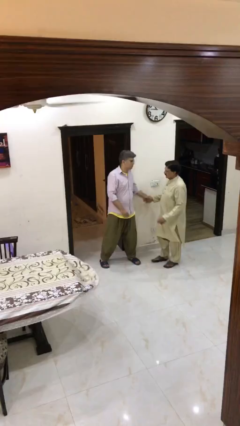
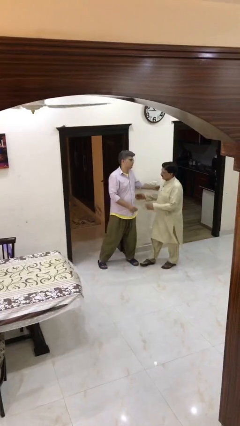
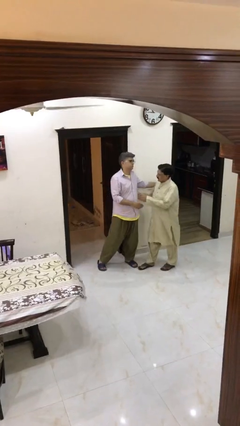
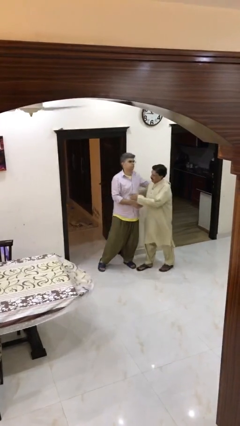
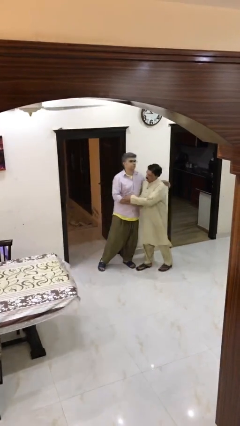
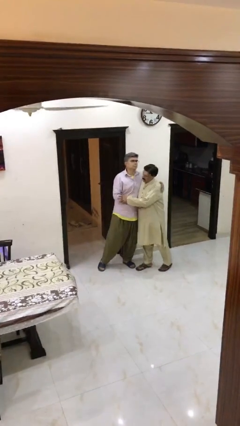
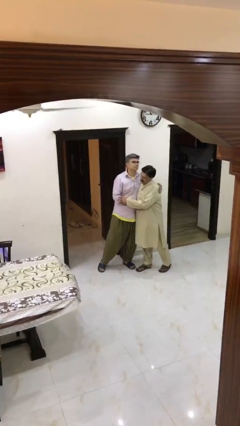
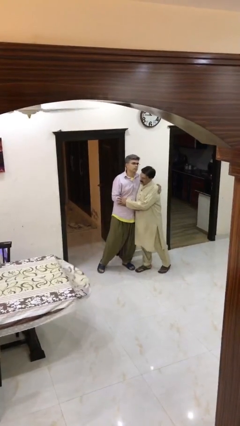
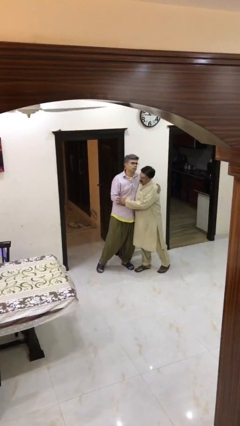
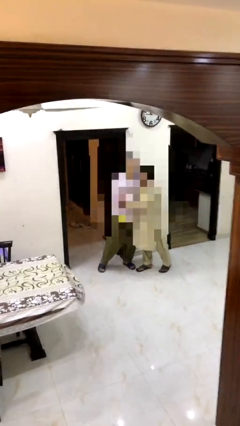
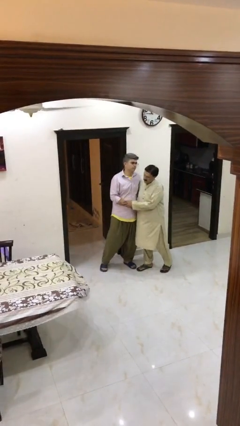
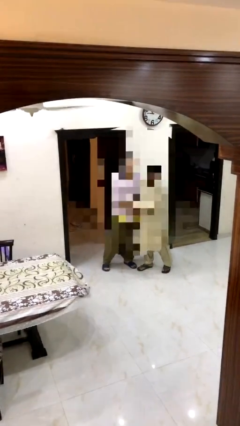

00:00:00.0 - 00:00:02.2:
person embraces person

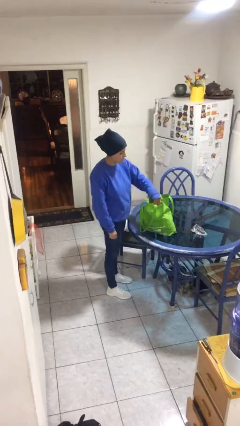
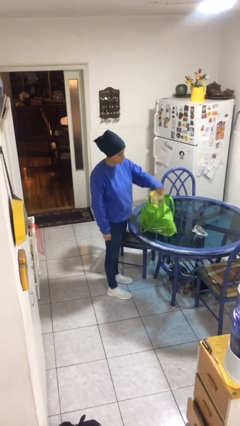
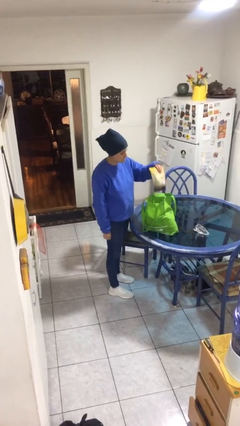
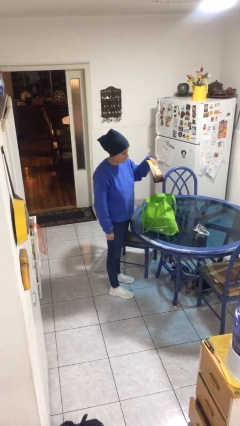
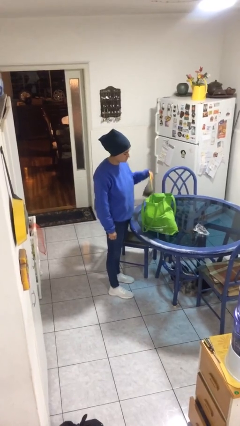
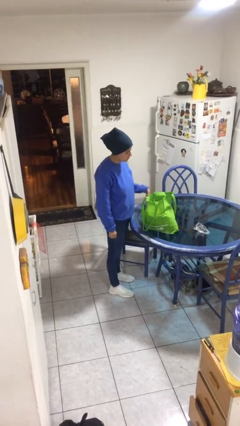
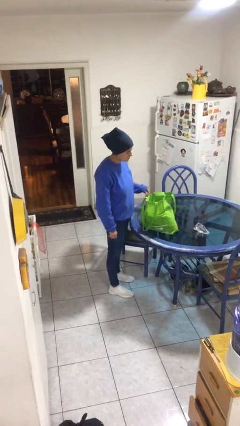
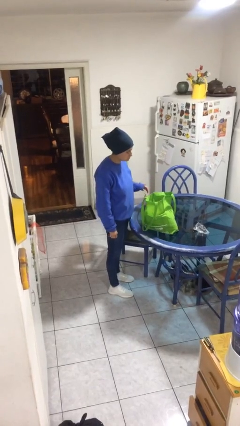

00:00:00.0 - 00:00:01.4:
person takes object from bag

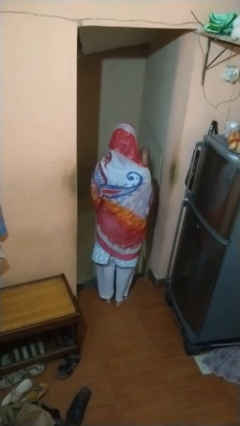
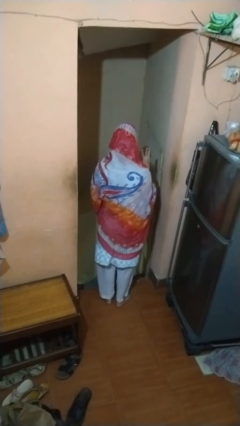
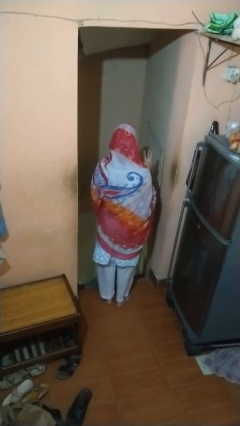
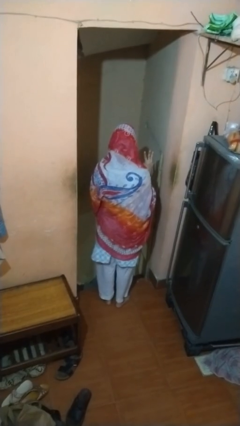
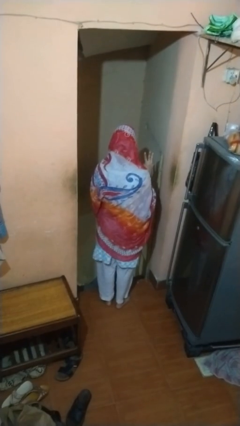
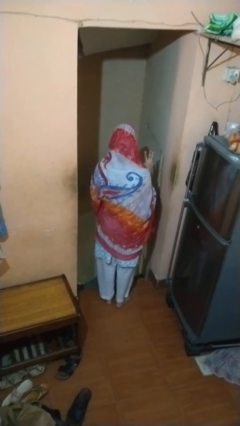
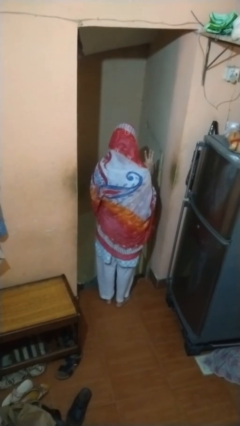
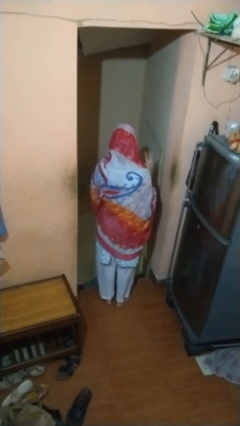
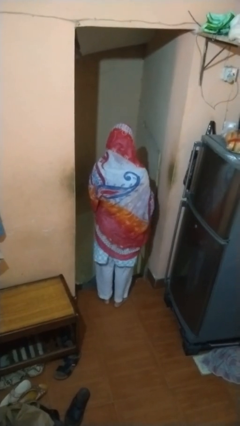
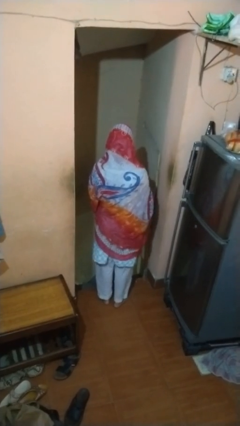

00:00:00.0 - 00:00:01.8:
person gestures number three

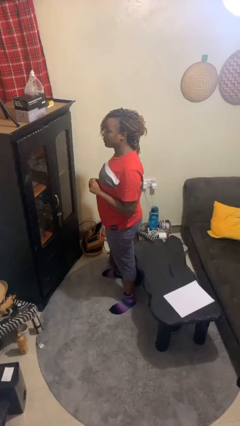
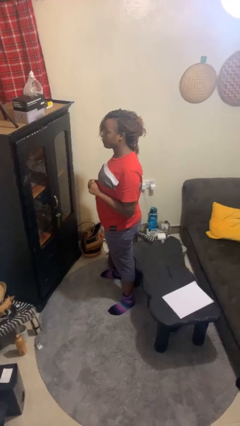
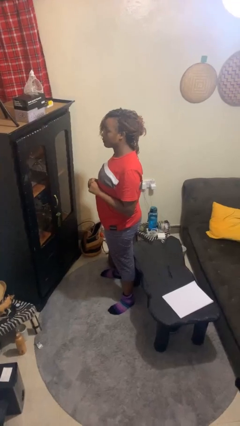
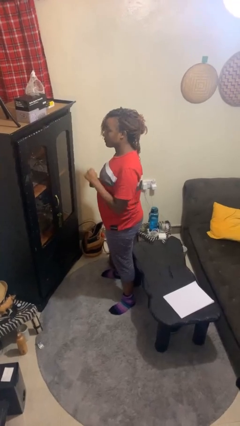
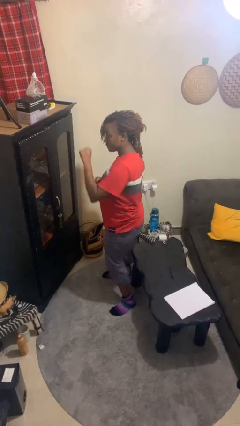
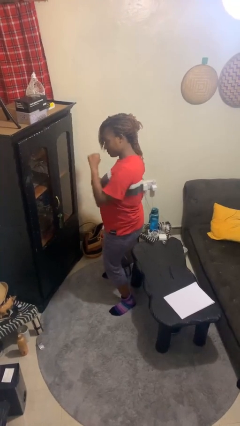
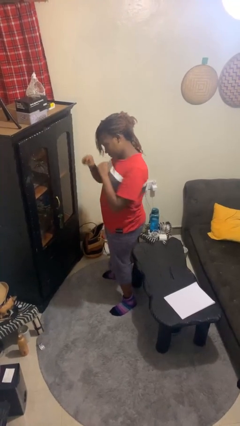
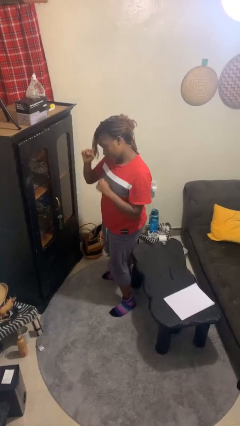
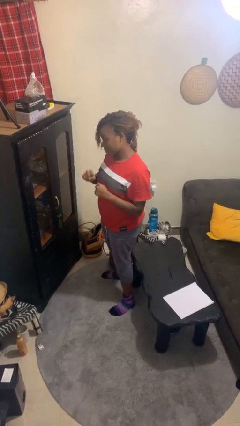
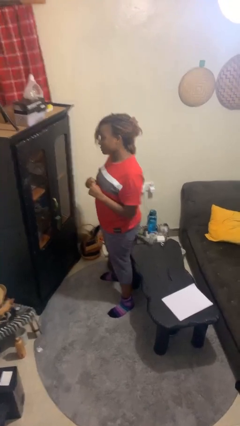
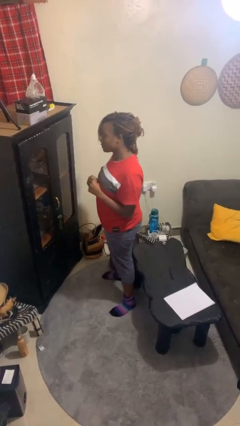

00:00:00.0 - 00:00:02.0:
person punches

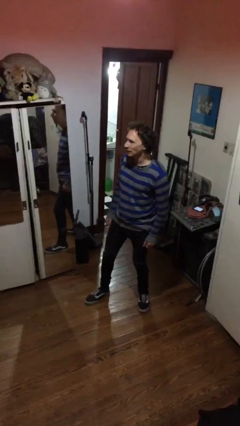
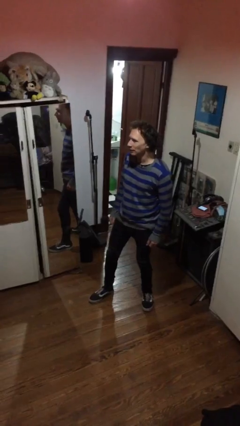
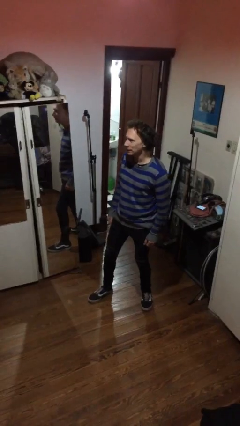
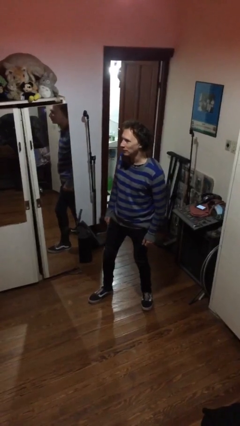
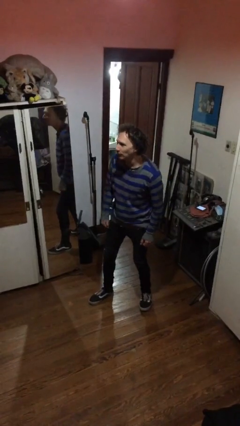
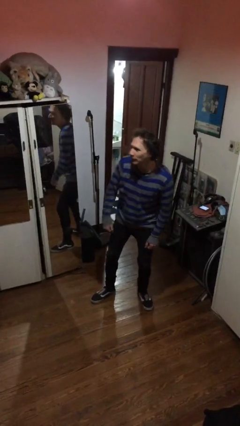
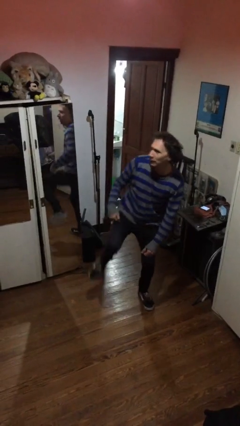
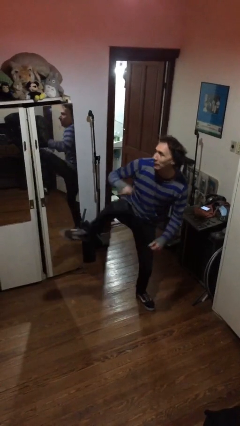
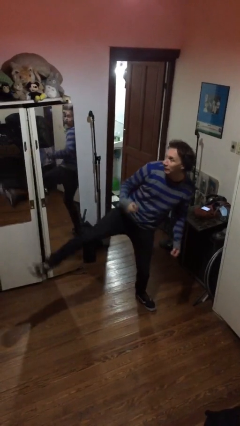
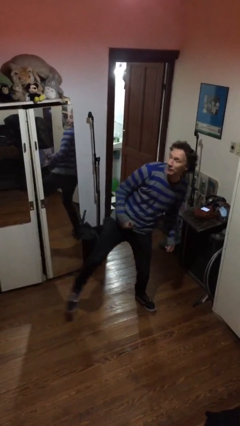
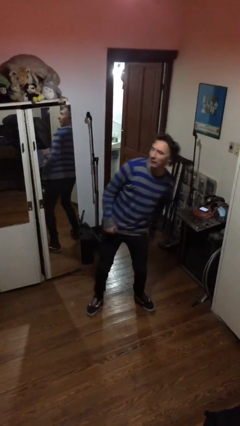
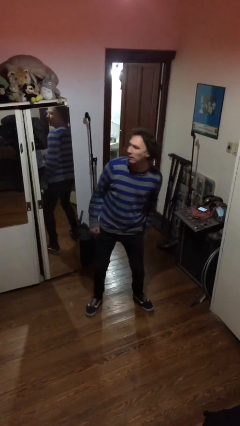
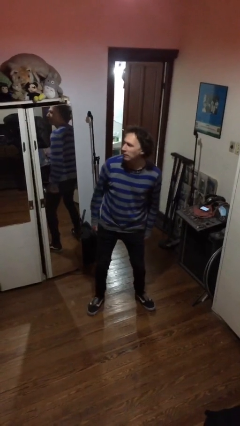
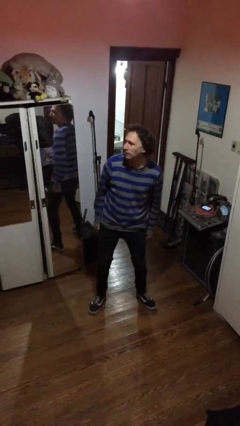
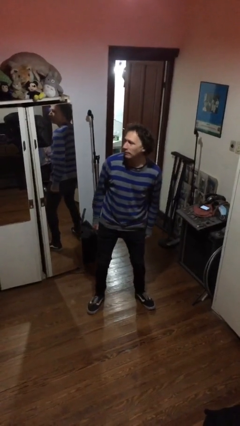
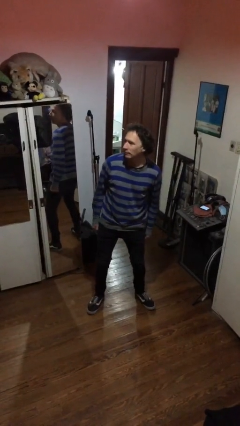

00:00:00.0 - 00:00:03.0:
person karate kicks

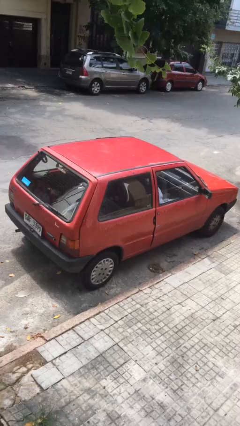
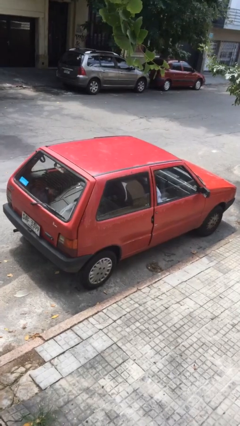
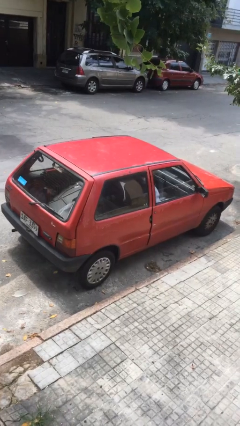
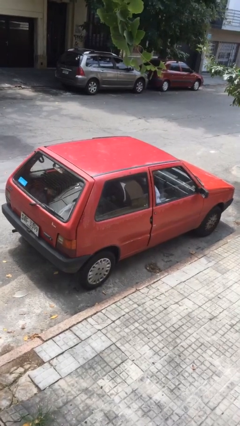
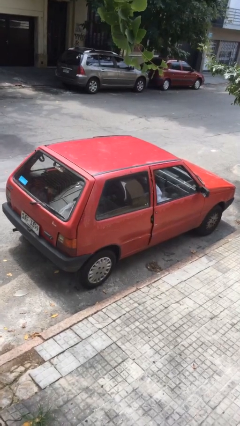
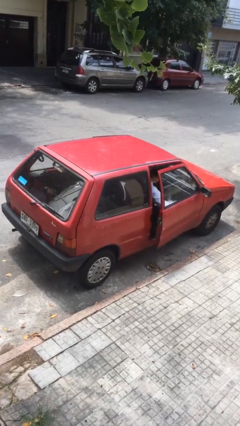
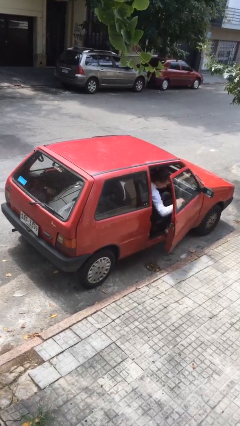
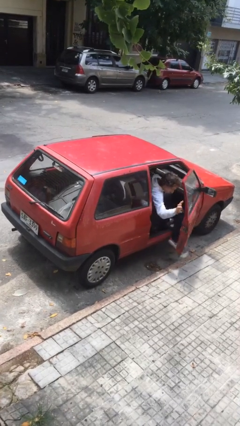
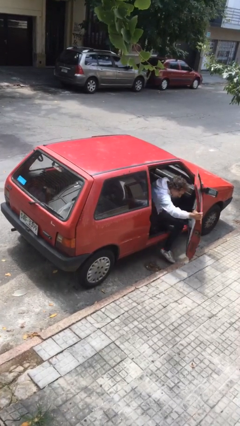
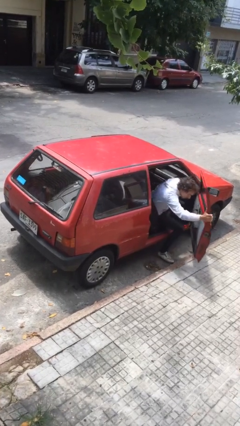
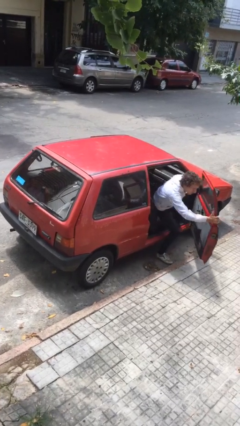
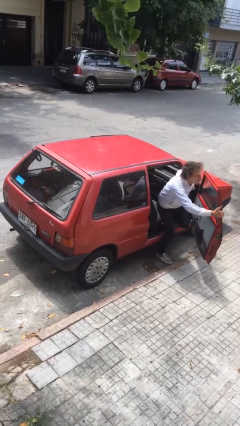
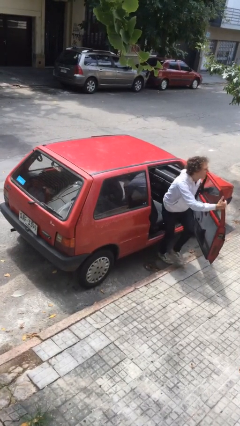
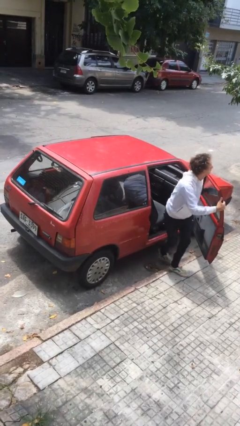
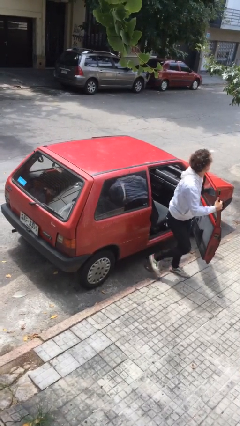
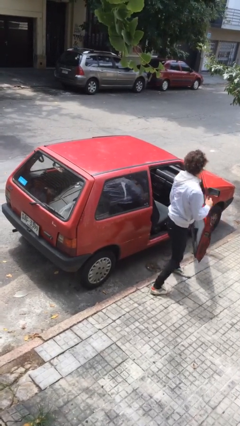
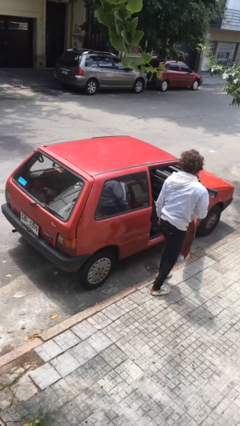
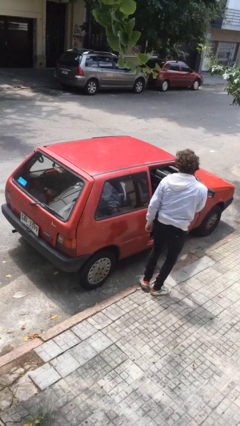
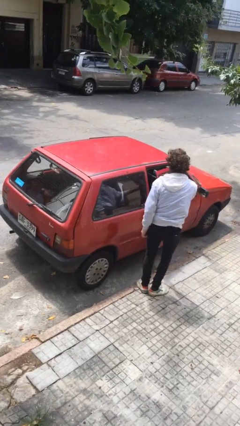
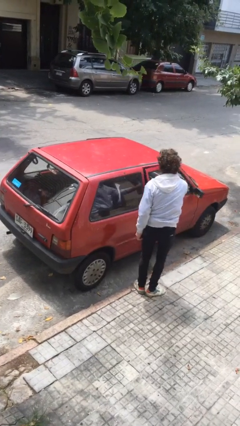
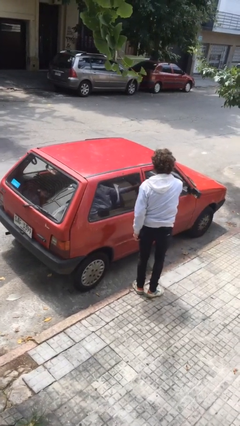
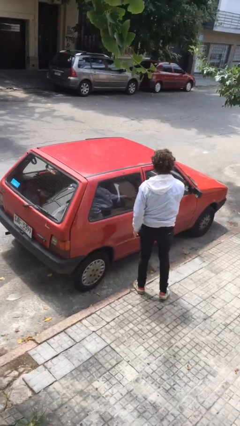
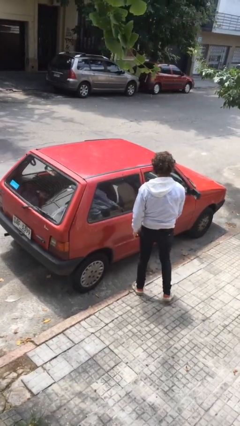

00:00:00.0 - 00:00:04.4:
car drops off person

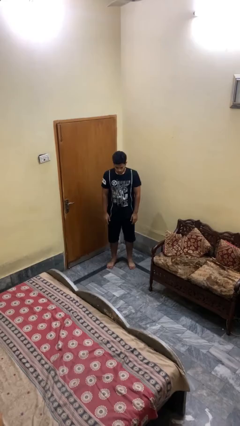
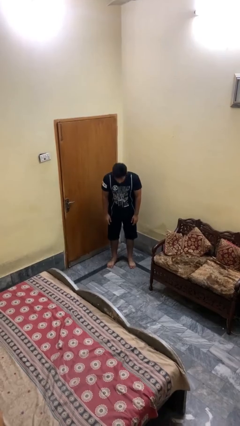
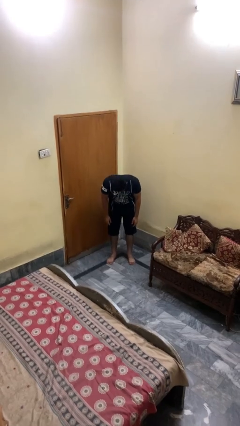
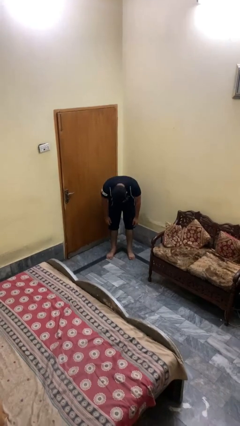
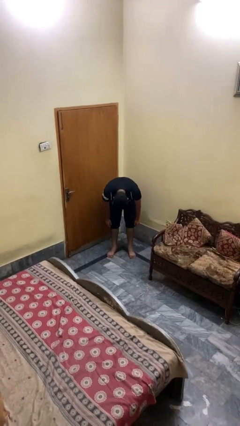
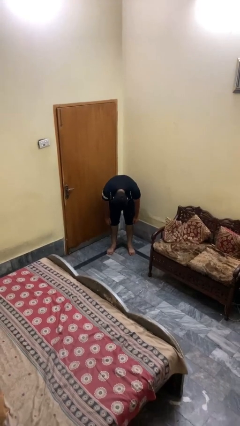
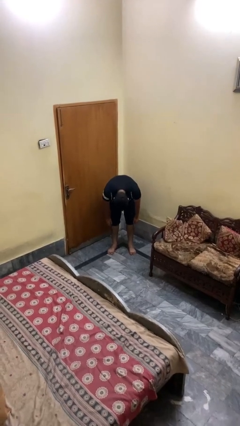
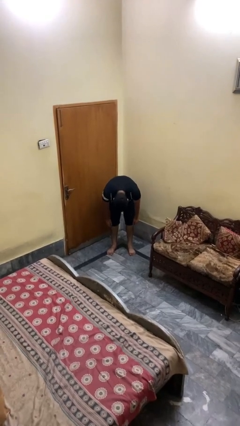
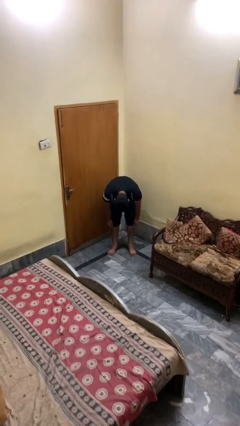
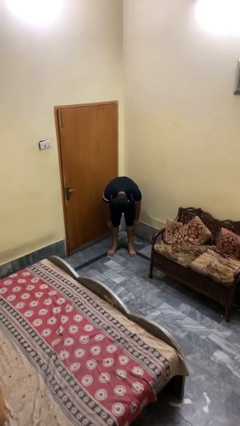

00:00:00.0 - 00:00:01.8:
person bows

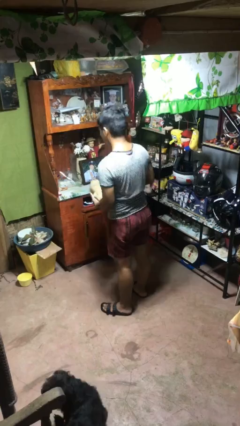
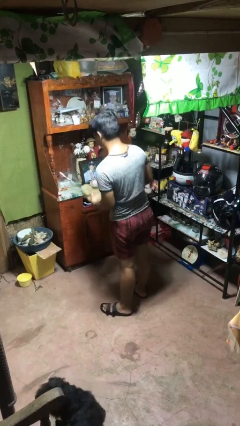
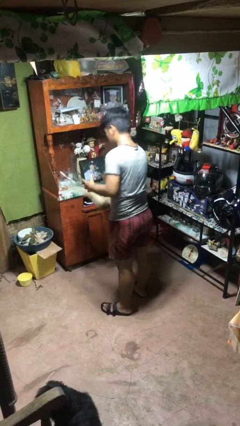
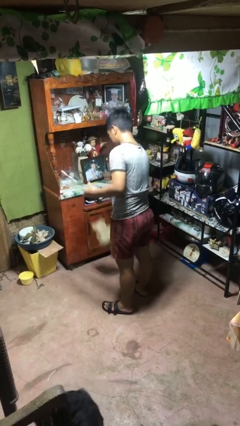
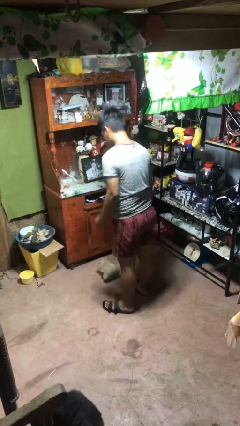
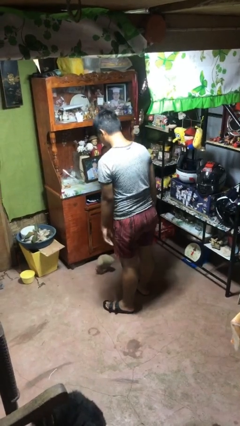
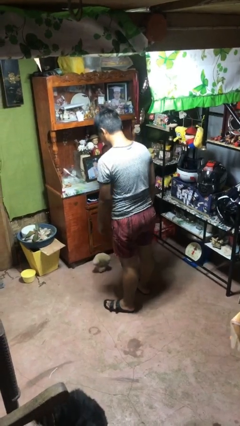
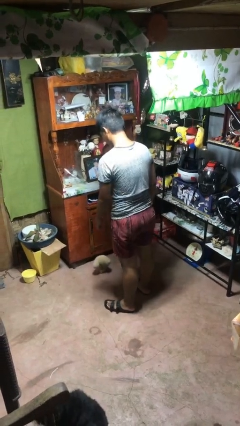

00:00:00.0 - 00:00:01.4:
person drops object
